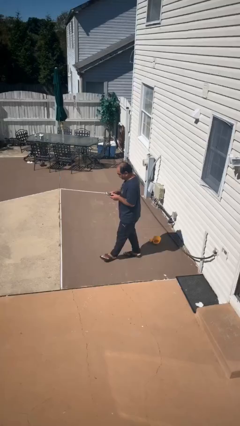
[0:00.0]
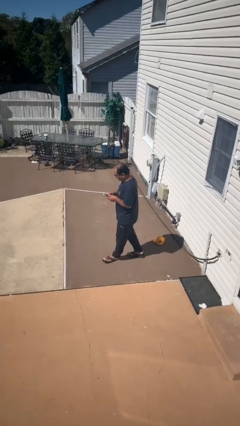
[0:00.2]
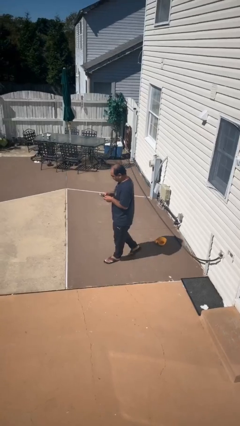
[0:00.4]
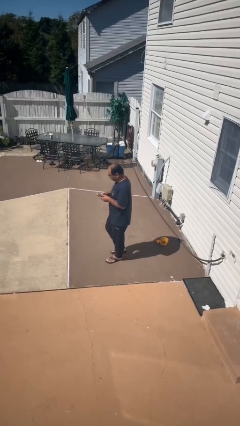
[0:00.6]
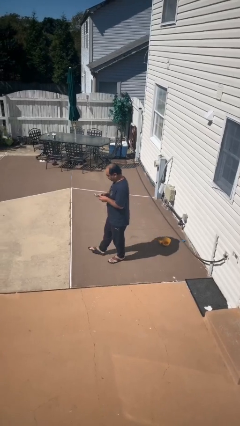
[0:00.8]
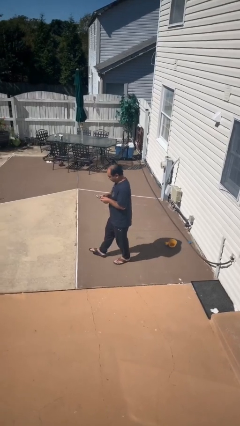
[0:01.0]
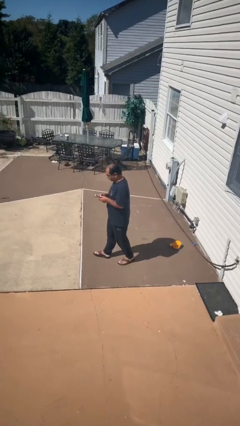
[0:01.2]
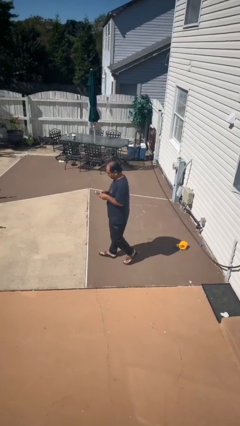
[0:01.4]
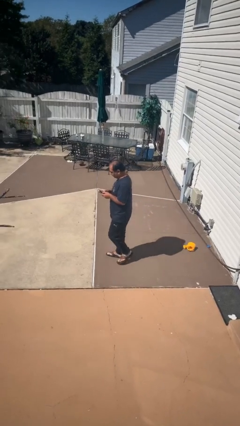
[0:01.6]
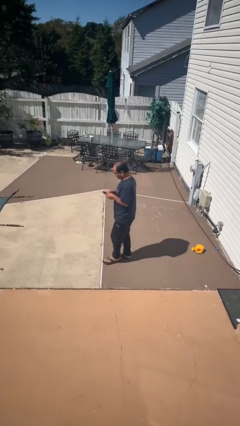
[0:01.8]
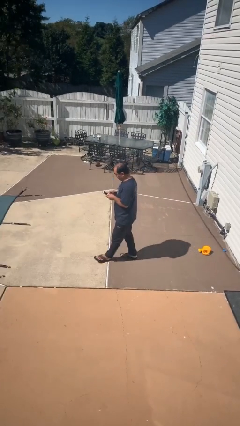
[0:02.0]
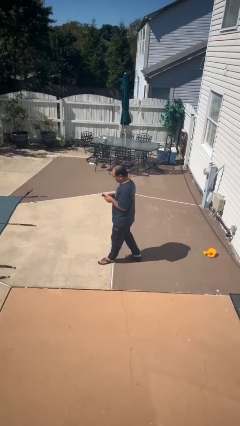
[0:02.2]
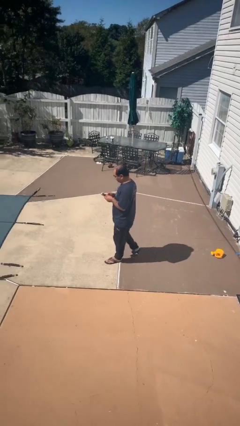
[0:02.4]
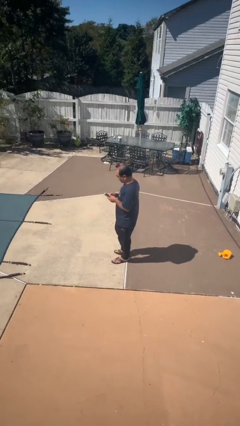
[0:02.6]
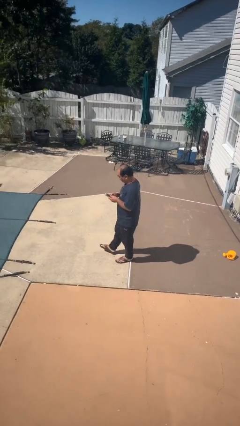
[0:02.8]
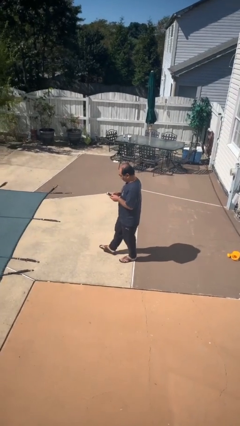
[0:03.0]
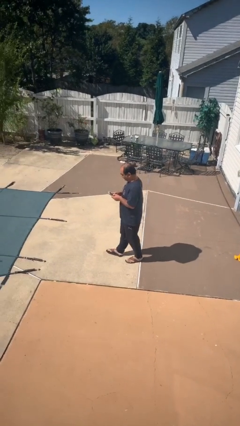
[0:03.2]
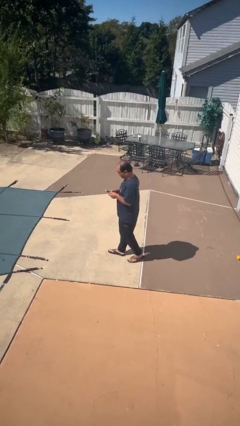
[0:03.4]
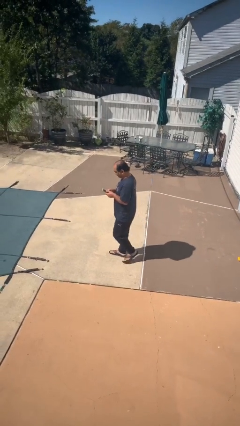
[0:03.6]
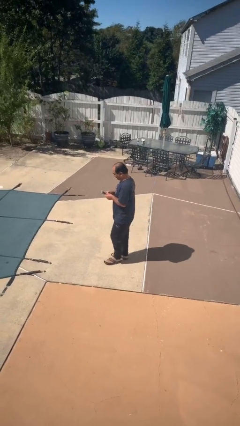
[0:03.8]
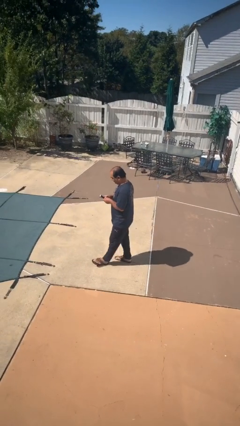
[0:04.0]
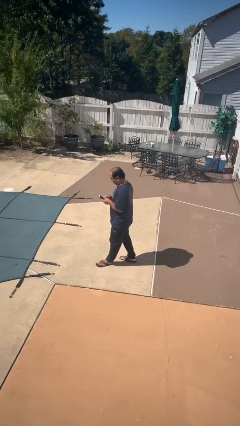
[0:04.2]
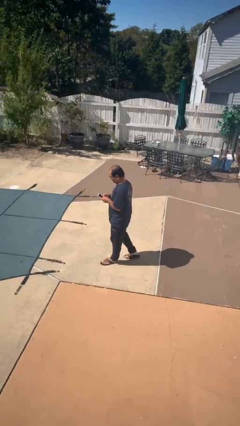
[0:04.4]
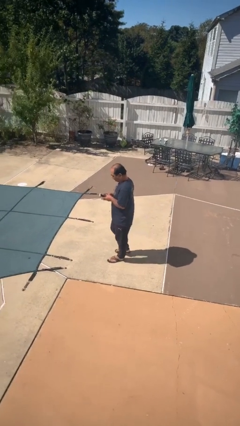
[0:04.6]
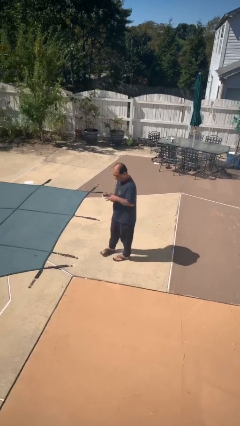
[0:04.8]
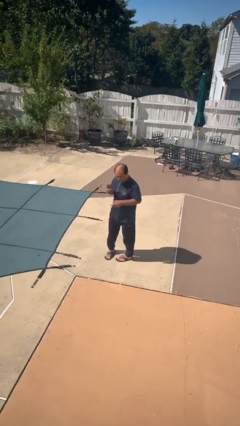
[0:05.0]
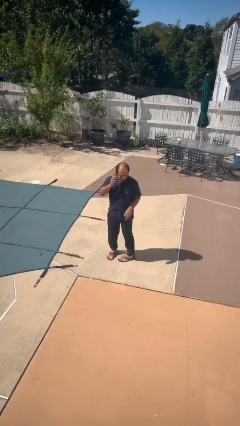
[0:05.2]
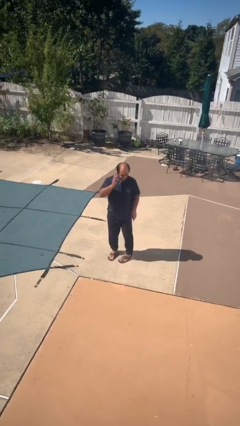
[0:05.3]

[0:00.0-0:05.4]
person texts on phone

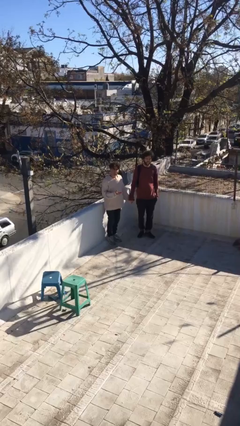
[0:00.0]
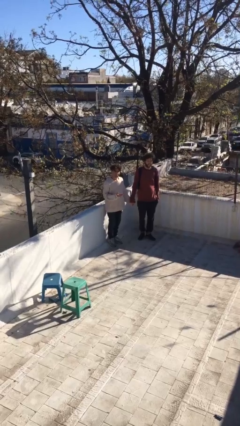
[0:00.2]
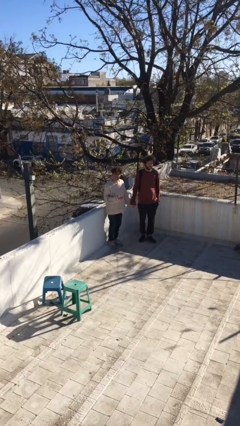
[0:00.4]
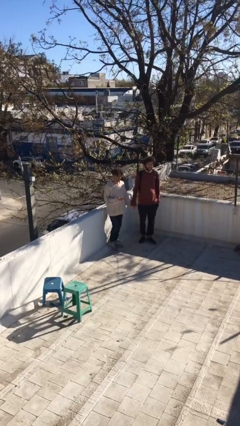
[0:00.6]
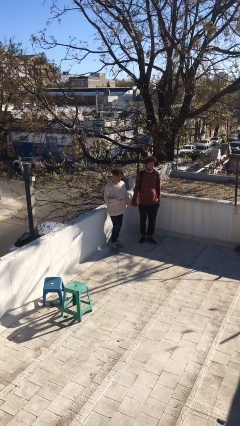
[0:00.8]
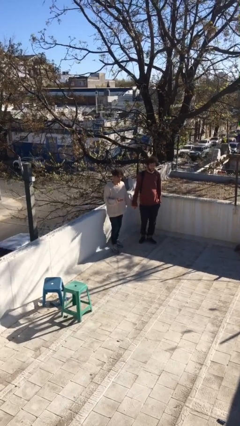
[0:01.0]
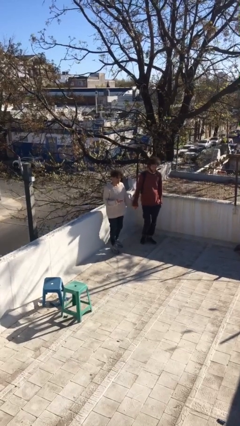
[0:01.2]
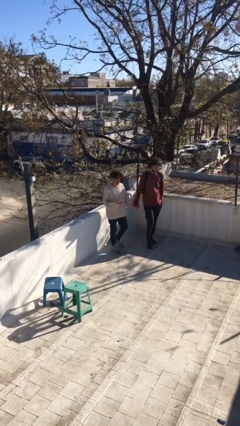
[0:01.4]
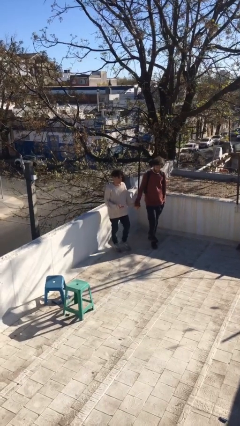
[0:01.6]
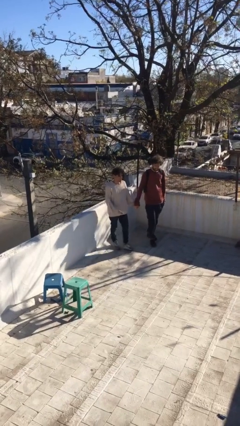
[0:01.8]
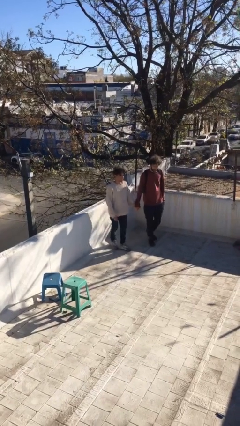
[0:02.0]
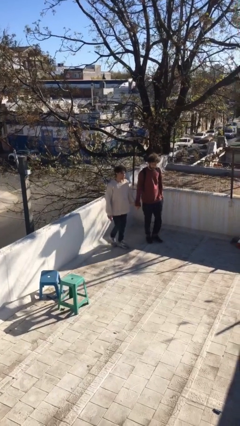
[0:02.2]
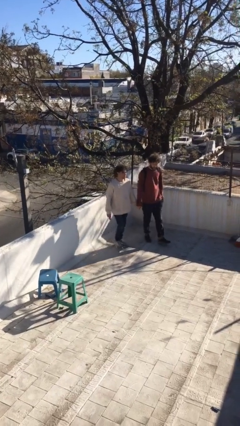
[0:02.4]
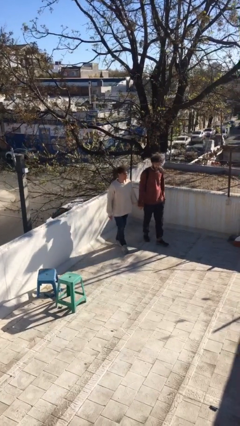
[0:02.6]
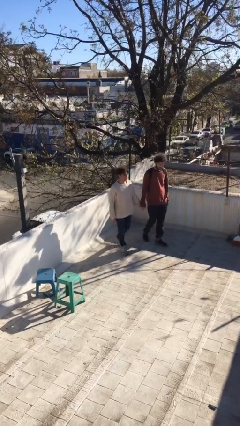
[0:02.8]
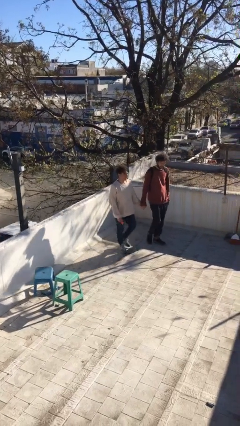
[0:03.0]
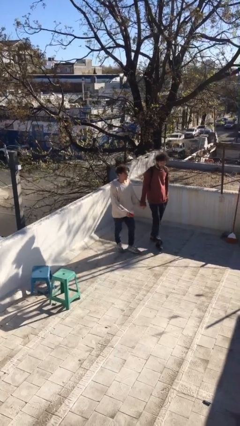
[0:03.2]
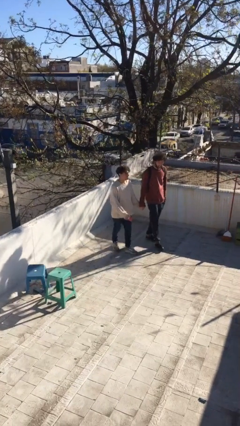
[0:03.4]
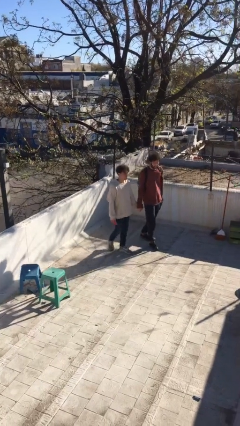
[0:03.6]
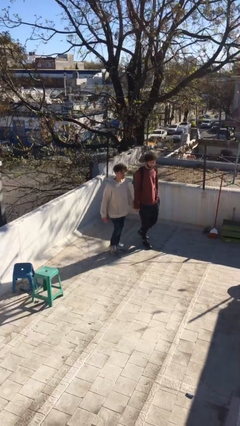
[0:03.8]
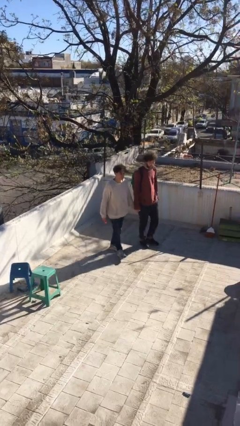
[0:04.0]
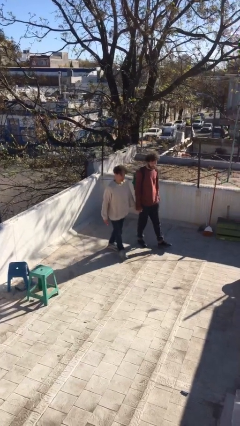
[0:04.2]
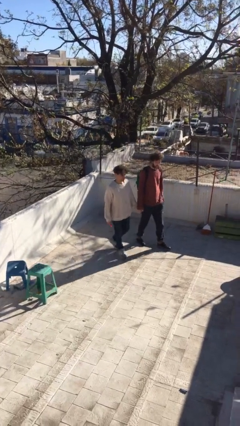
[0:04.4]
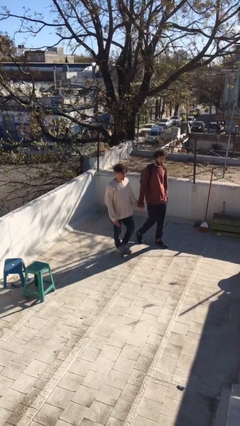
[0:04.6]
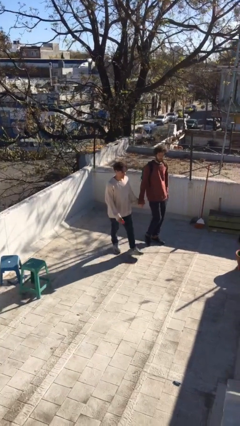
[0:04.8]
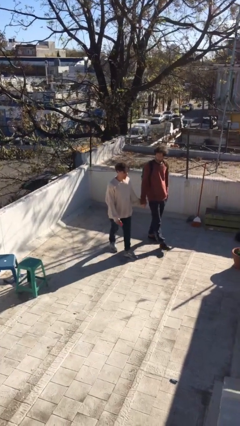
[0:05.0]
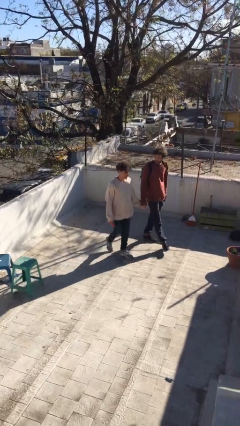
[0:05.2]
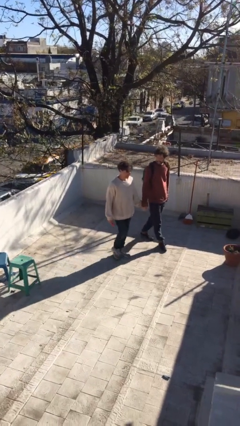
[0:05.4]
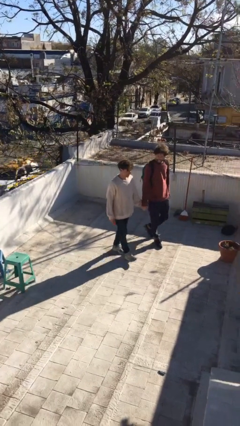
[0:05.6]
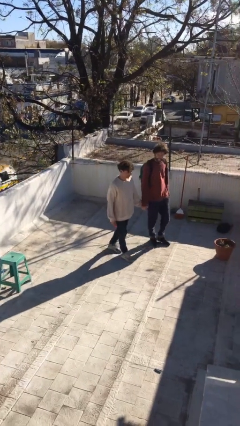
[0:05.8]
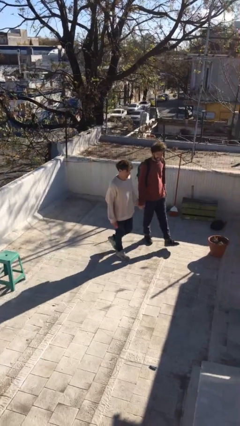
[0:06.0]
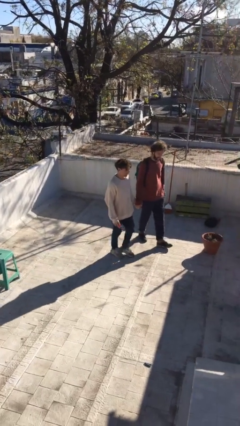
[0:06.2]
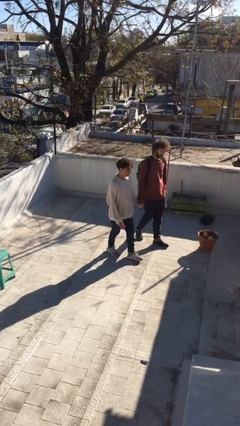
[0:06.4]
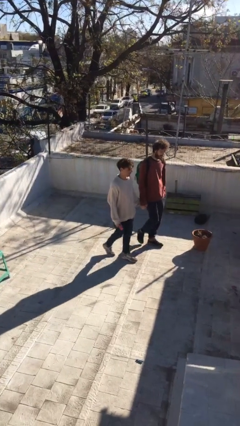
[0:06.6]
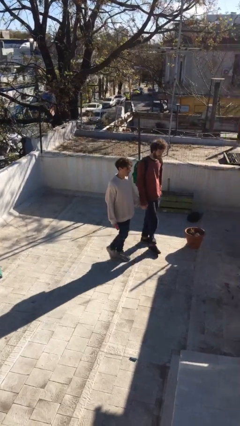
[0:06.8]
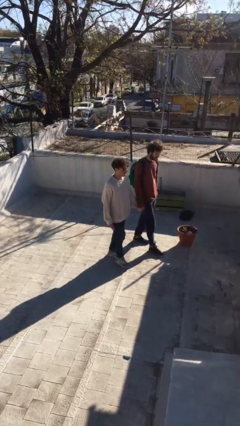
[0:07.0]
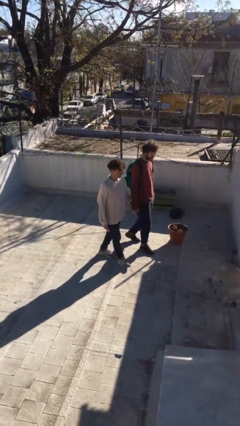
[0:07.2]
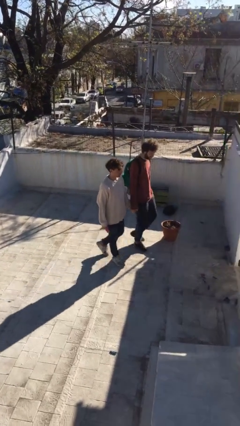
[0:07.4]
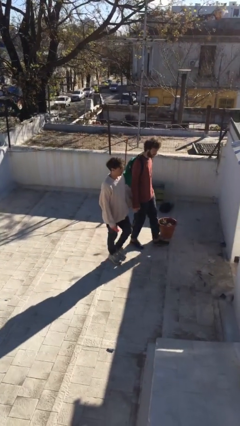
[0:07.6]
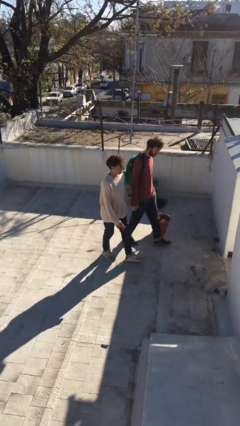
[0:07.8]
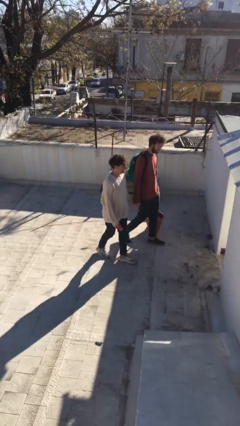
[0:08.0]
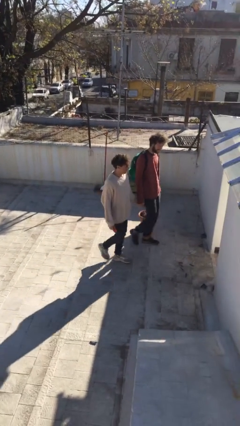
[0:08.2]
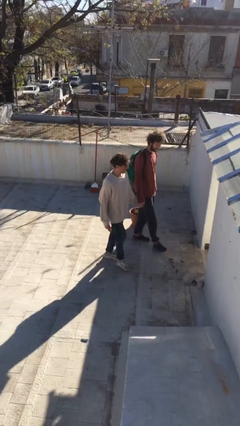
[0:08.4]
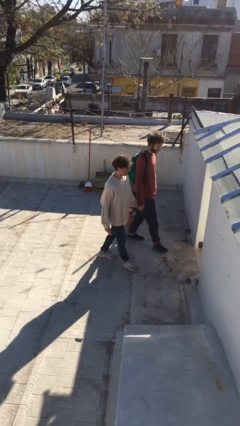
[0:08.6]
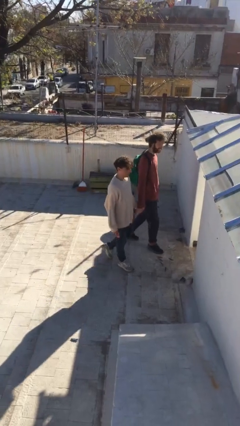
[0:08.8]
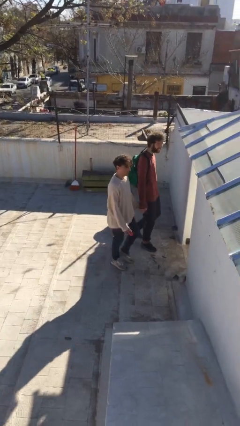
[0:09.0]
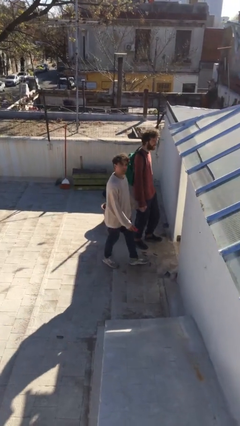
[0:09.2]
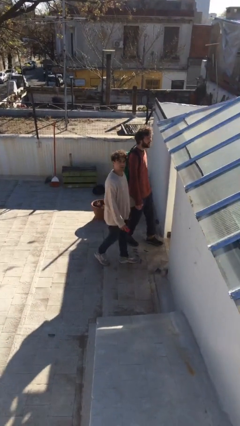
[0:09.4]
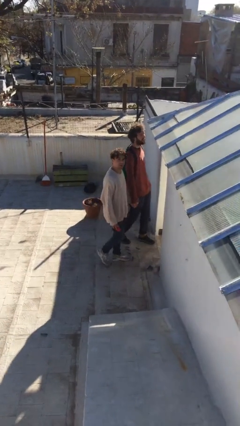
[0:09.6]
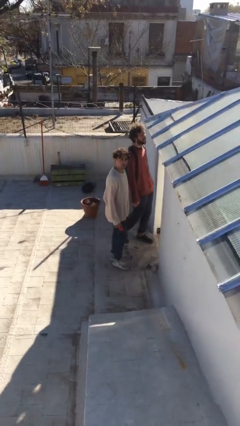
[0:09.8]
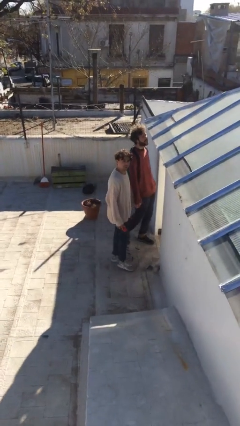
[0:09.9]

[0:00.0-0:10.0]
person holds hand

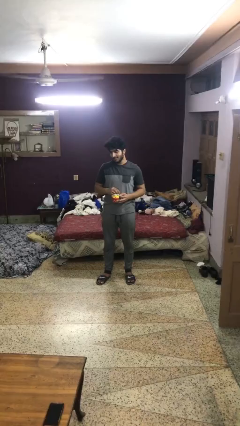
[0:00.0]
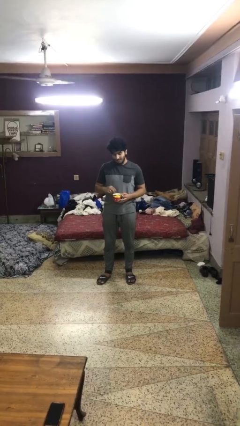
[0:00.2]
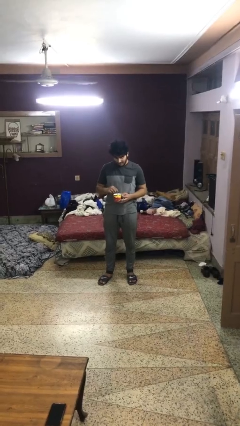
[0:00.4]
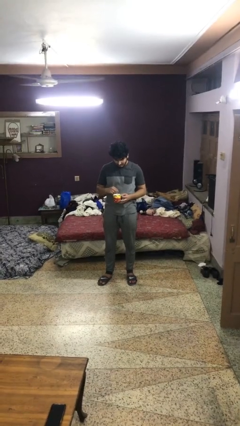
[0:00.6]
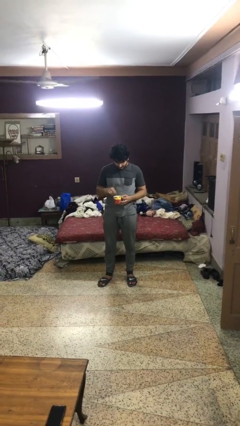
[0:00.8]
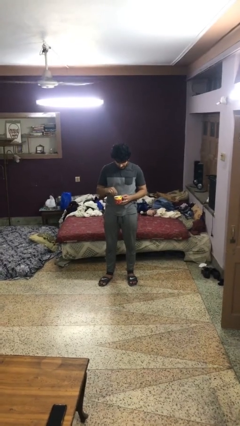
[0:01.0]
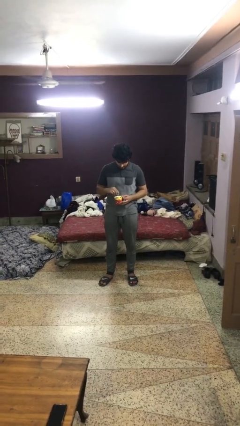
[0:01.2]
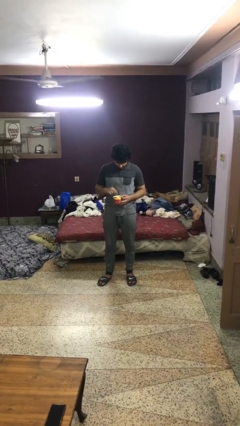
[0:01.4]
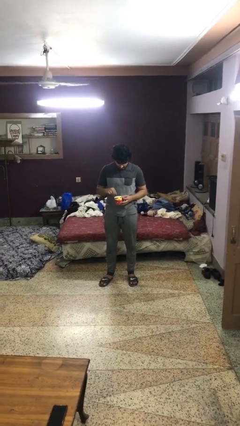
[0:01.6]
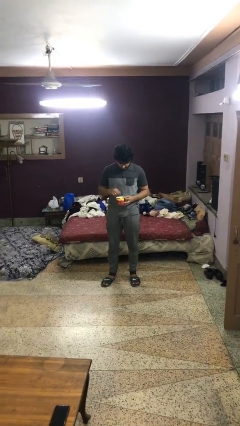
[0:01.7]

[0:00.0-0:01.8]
person stirs mug

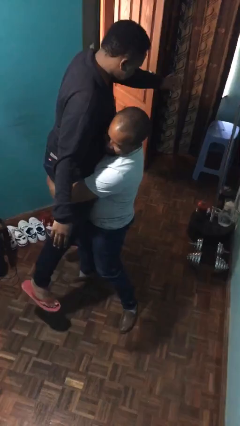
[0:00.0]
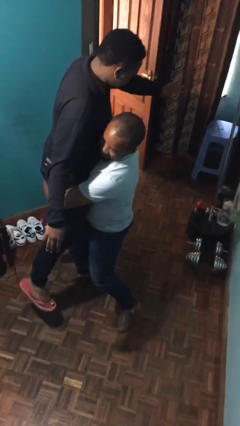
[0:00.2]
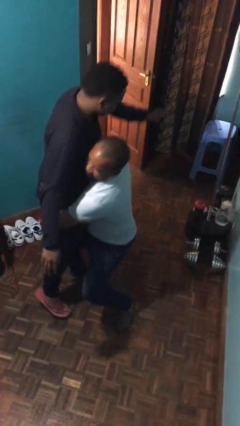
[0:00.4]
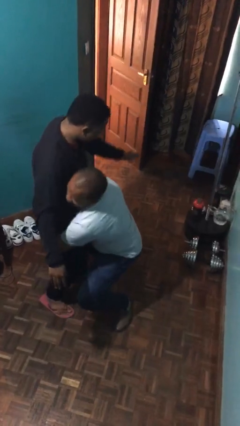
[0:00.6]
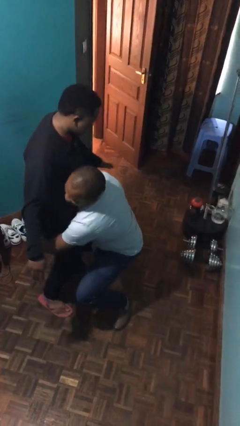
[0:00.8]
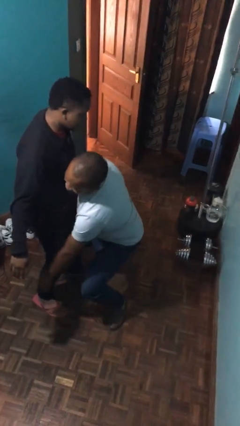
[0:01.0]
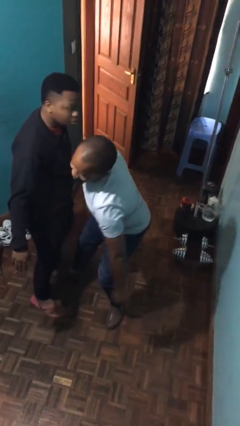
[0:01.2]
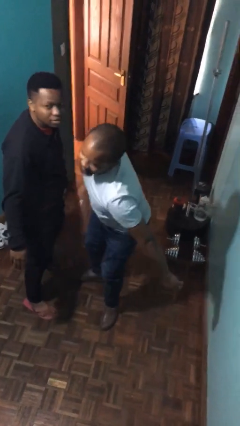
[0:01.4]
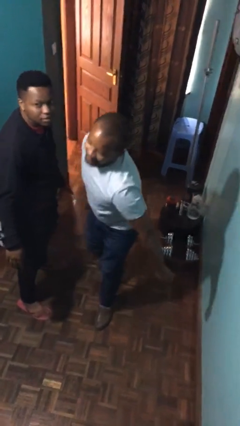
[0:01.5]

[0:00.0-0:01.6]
person puts down person
